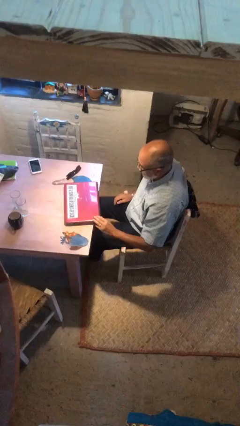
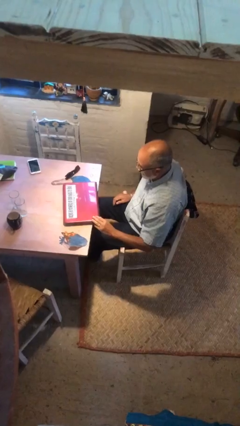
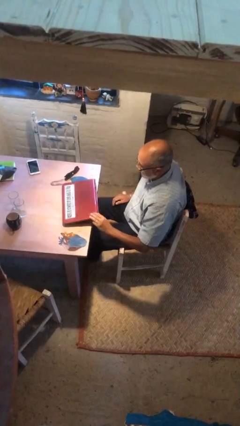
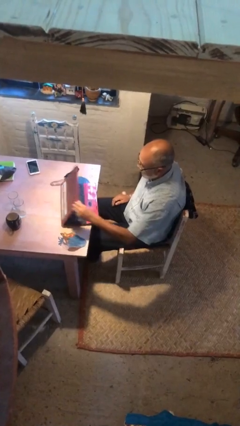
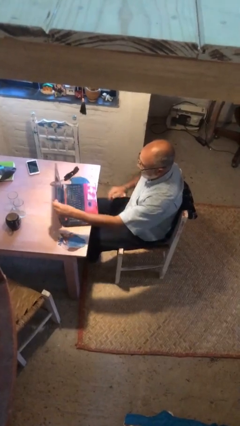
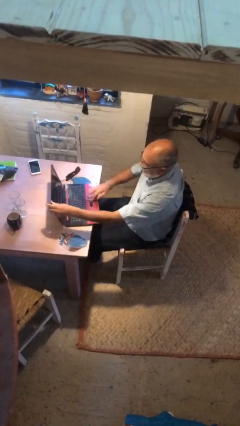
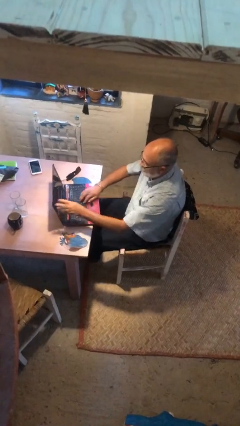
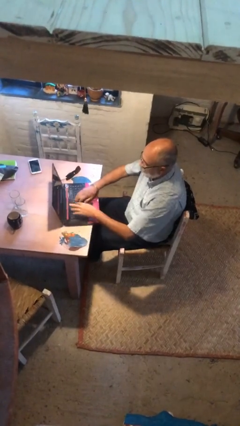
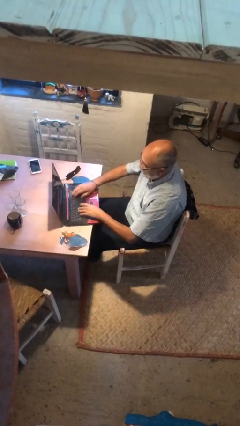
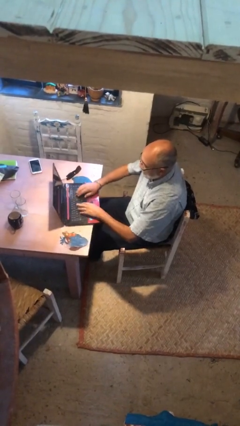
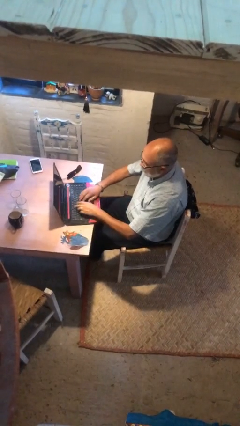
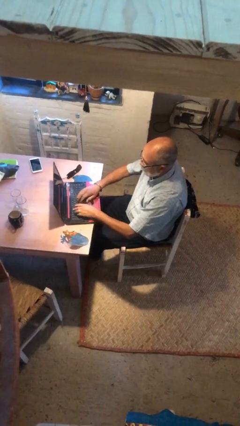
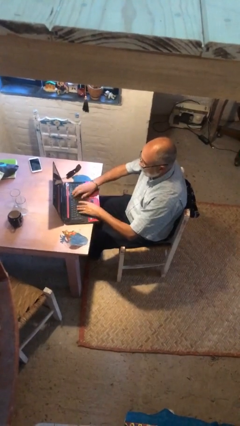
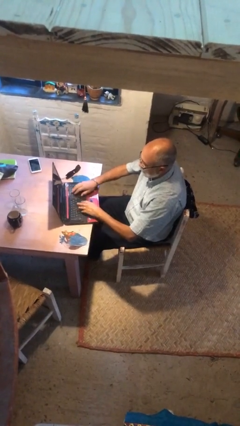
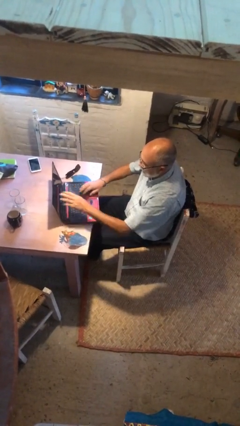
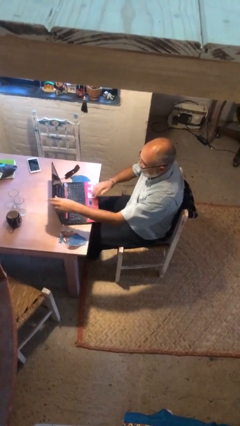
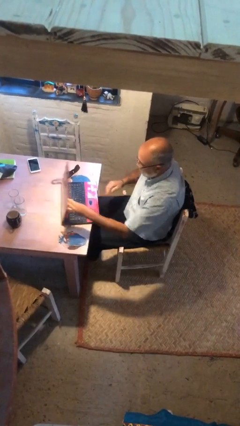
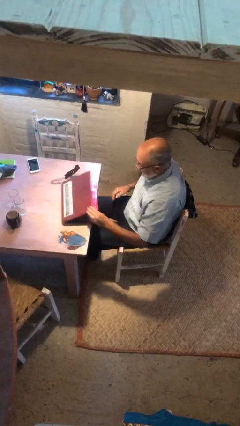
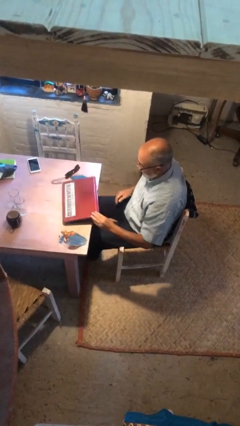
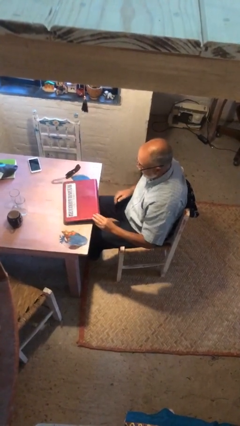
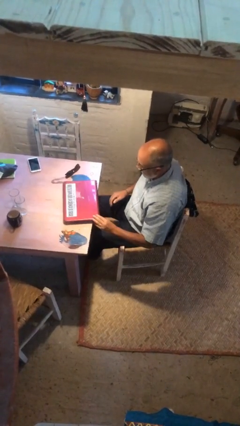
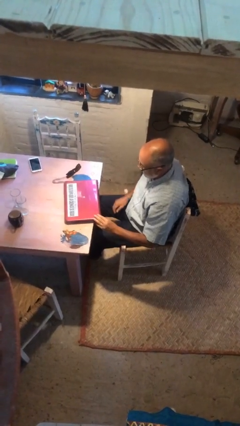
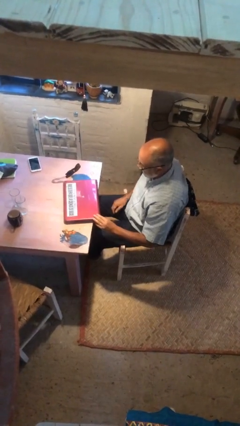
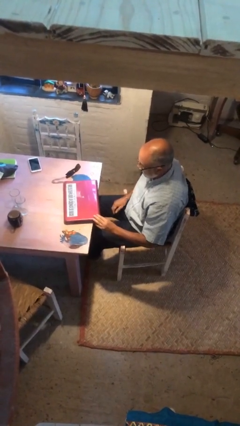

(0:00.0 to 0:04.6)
person interacts with laptop

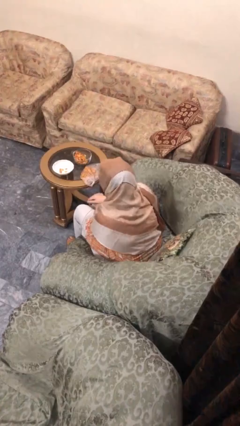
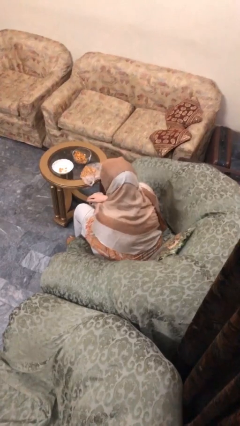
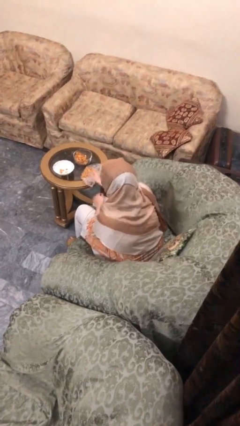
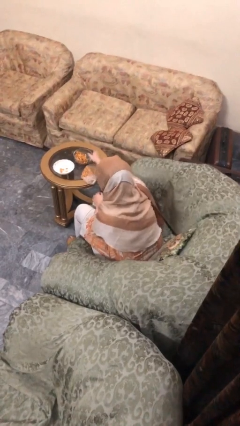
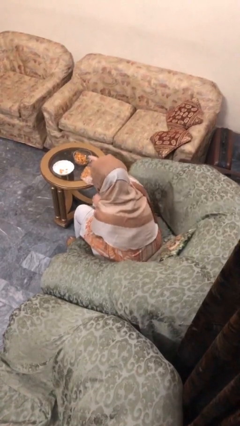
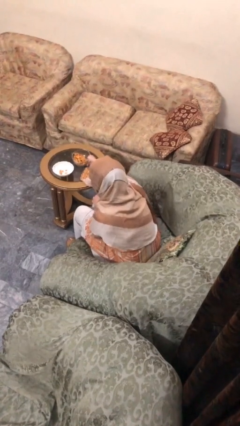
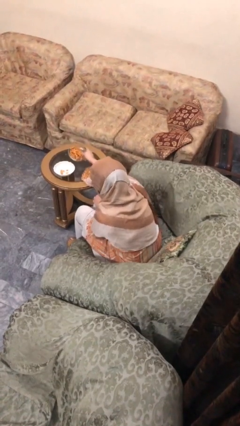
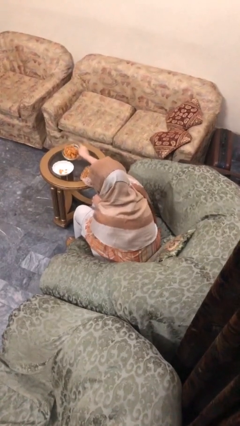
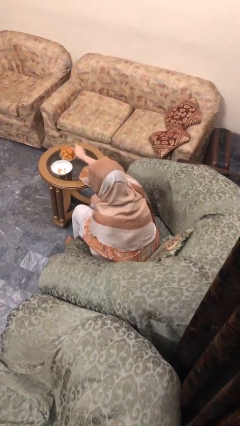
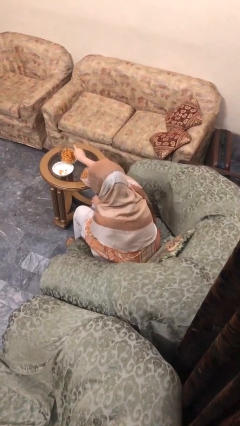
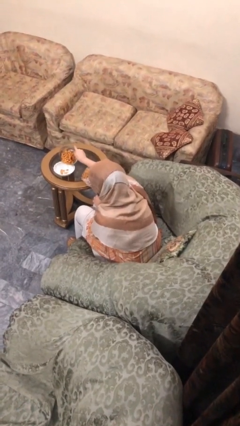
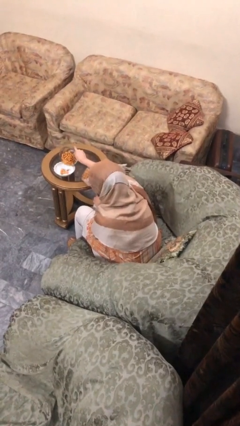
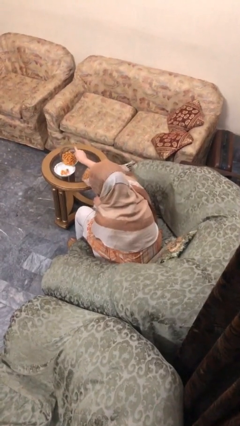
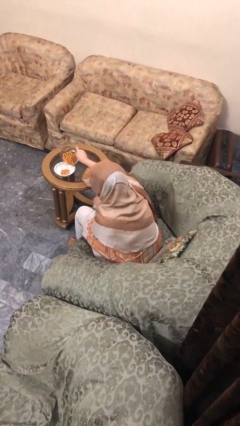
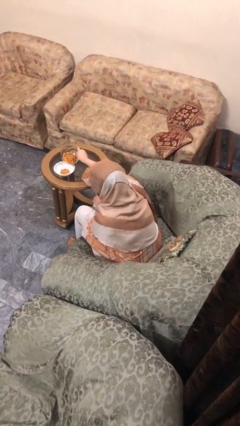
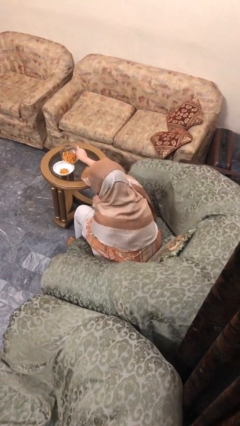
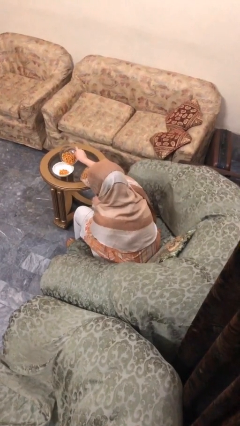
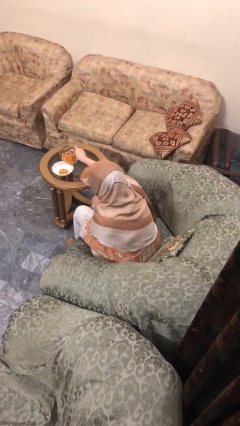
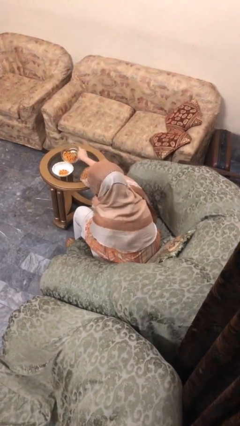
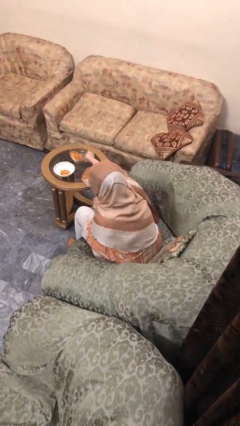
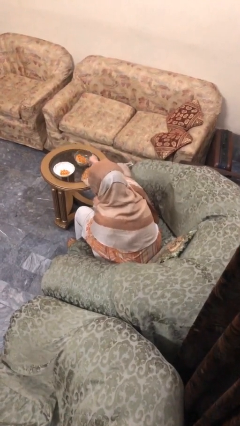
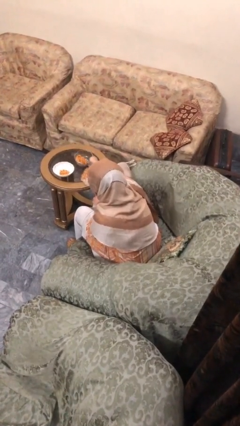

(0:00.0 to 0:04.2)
person pours into bowl

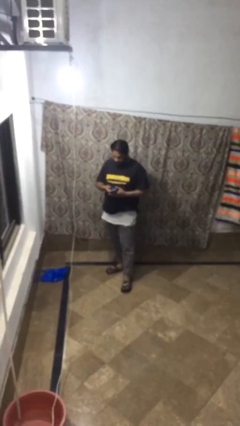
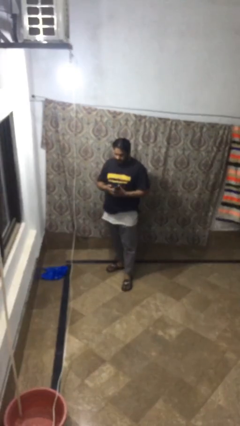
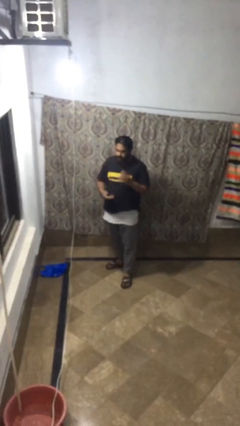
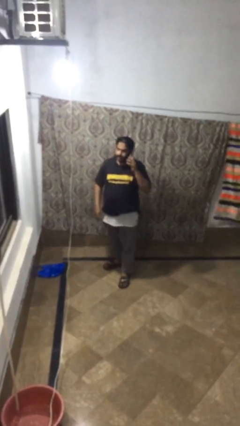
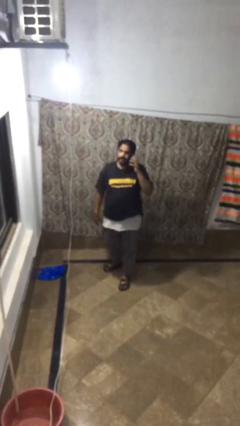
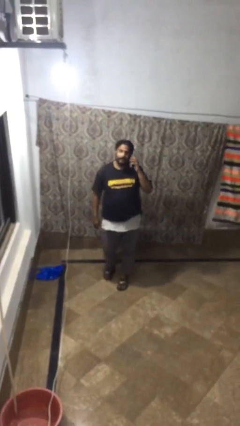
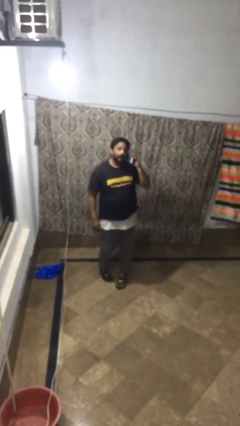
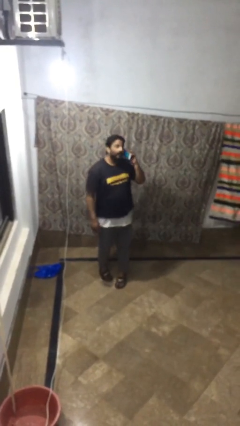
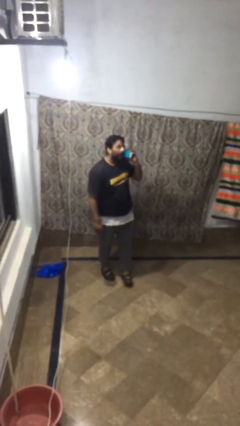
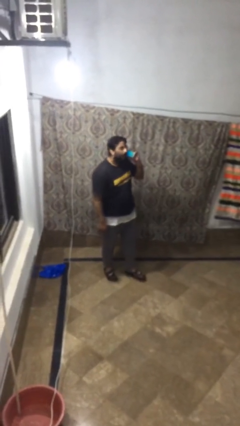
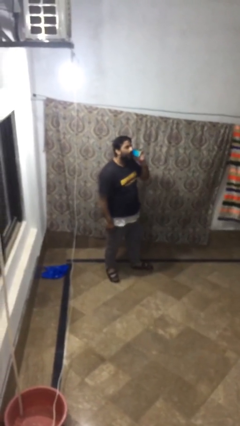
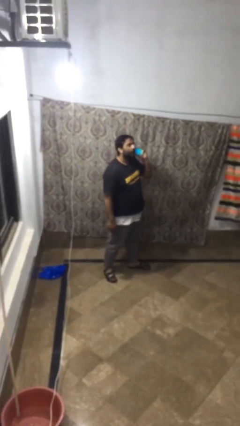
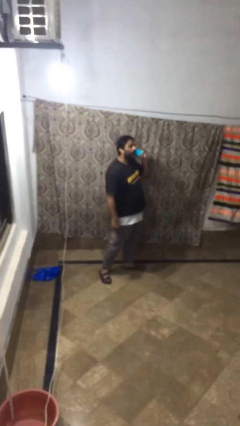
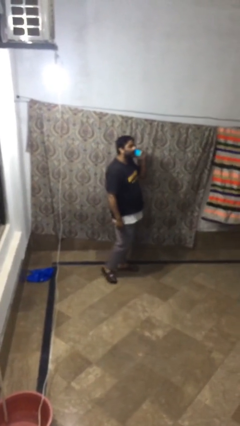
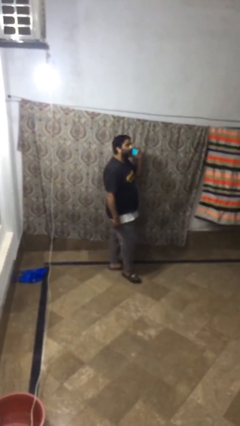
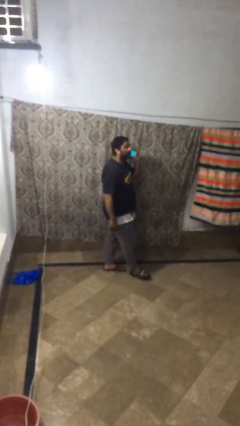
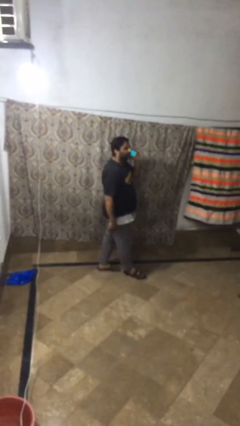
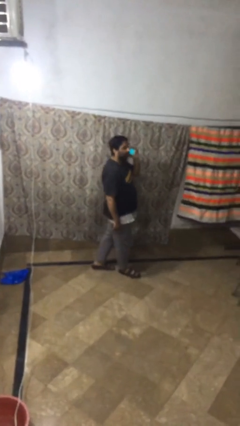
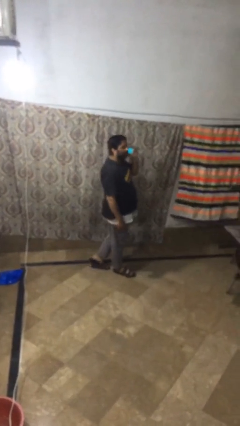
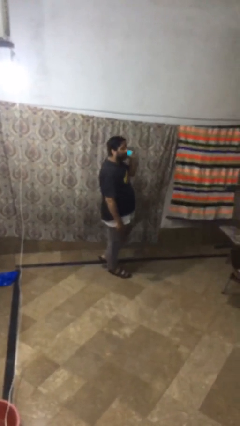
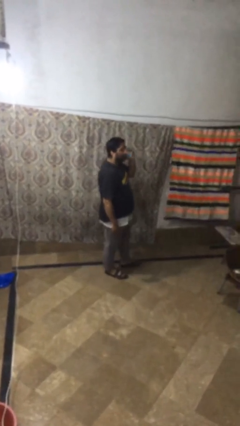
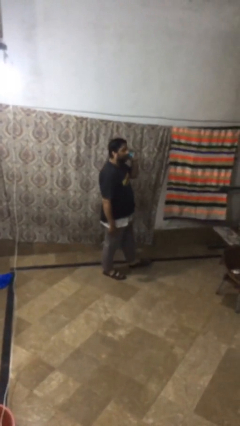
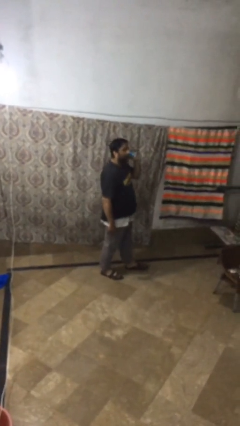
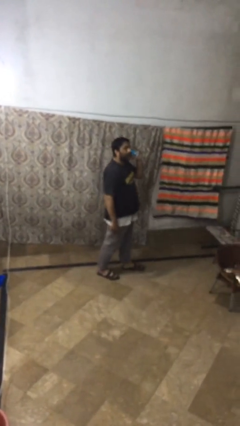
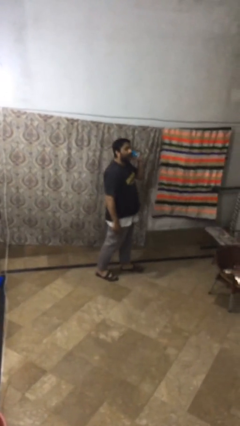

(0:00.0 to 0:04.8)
person talks on phone

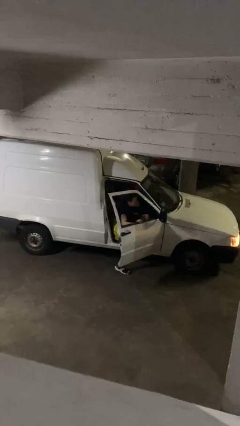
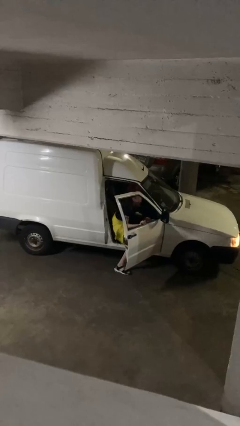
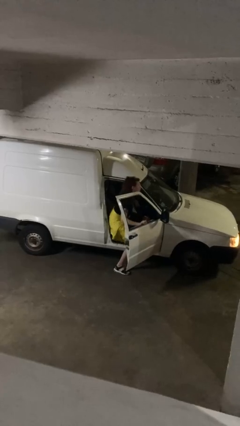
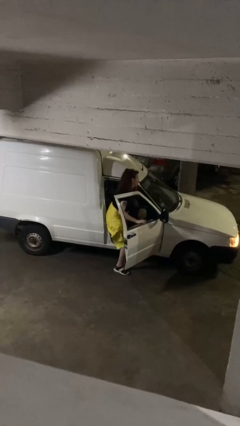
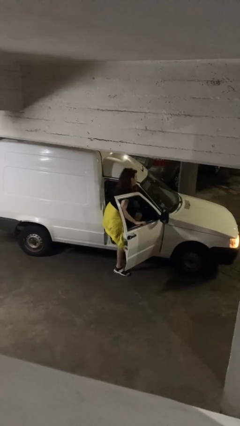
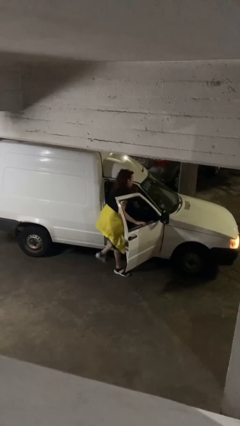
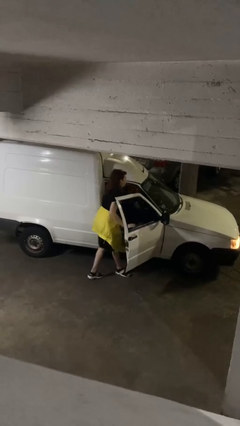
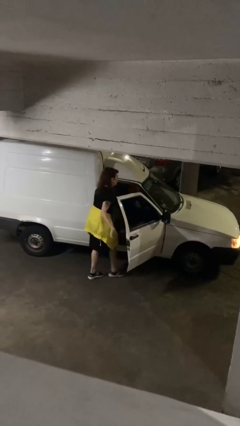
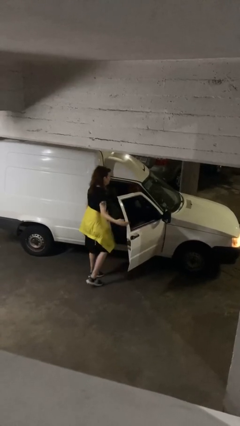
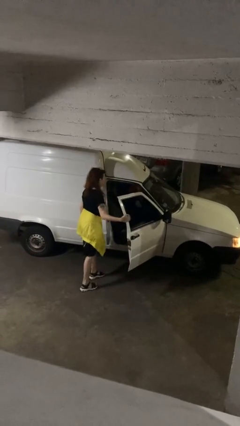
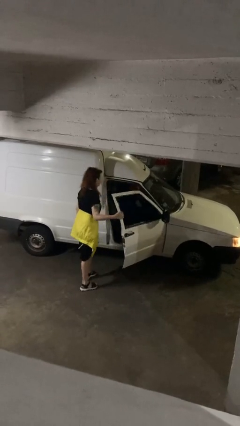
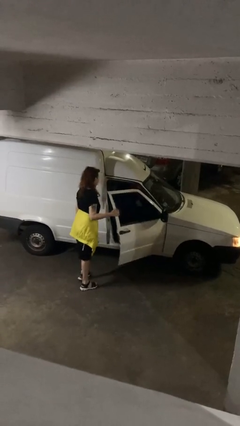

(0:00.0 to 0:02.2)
car drops off person

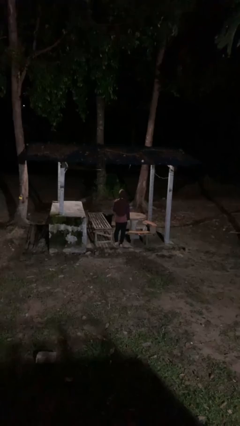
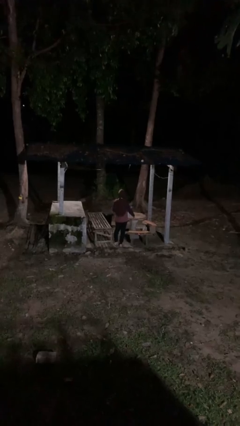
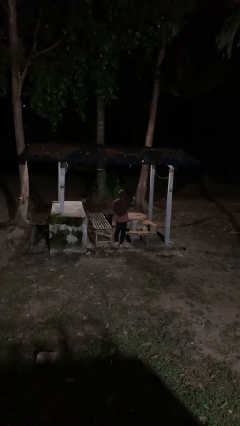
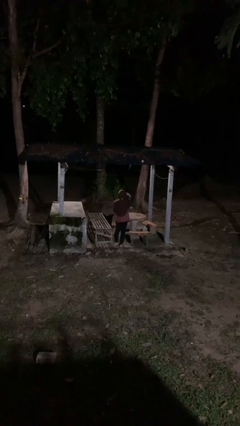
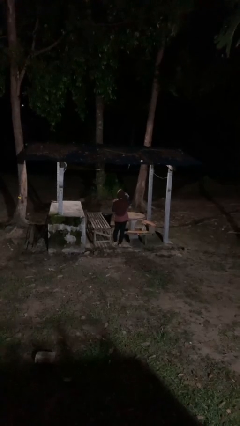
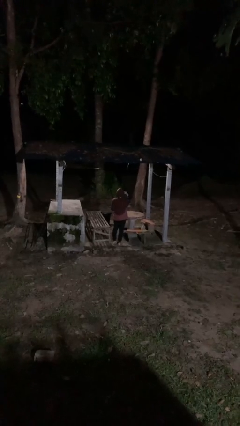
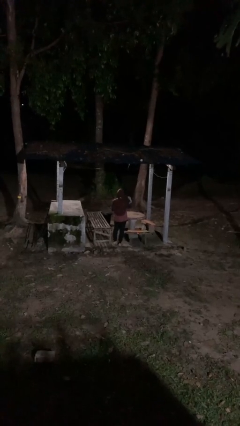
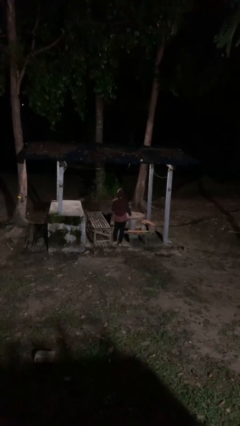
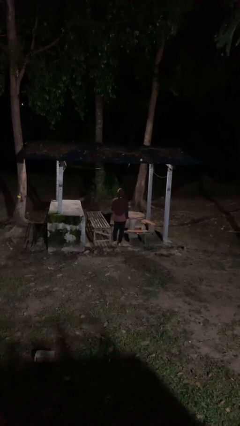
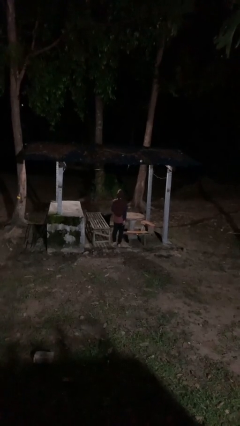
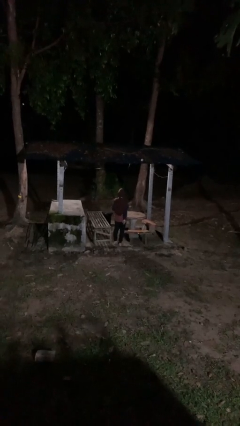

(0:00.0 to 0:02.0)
person gestures watch closely
